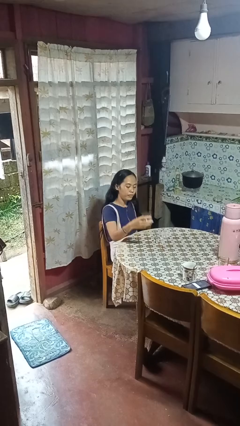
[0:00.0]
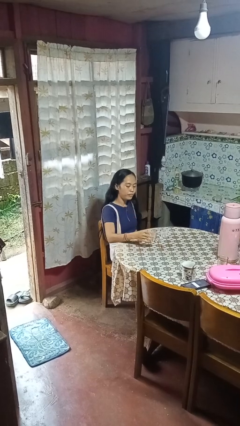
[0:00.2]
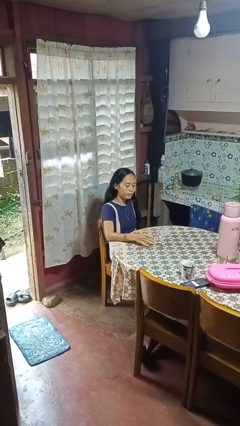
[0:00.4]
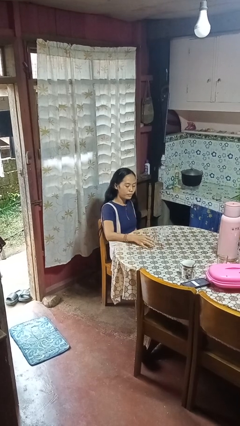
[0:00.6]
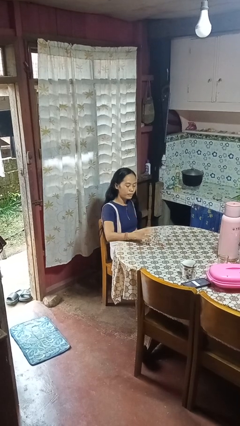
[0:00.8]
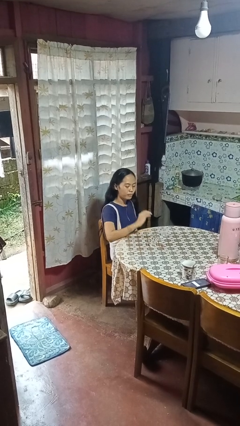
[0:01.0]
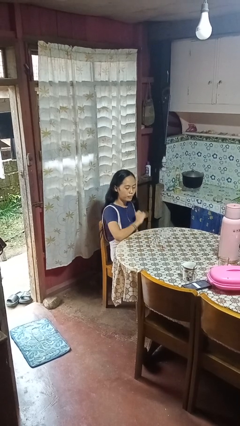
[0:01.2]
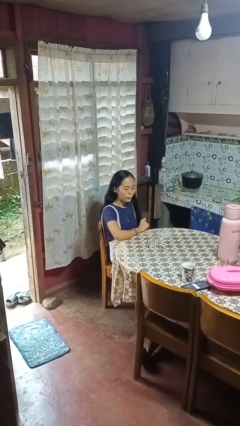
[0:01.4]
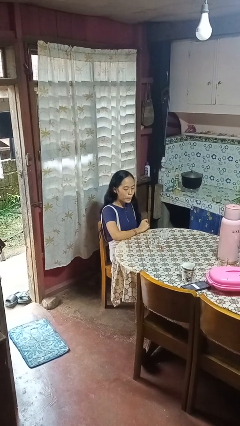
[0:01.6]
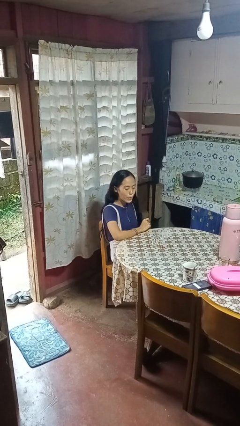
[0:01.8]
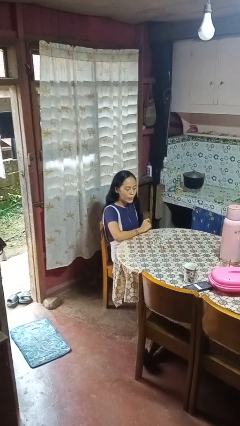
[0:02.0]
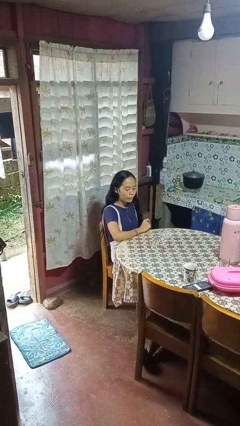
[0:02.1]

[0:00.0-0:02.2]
person puts down object on table

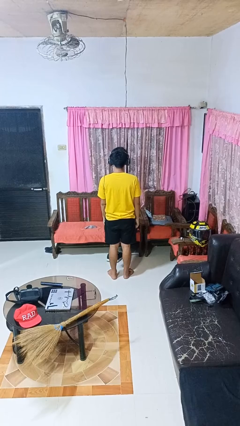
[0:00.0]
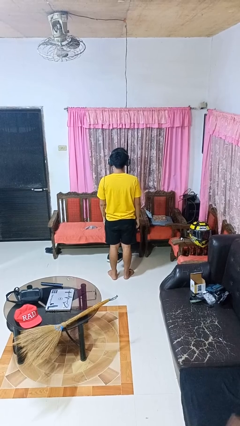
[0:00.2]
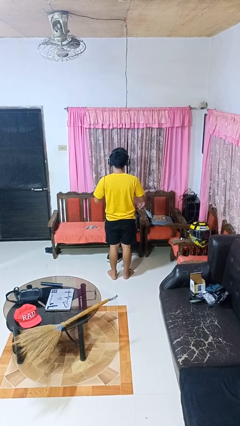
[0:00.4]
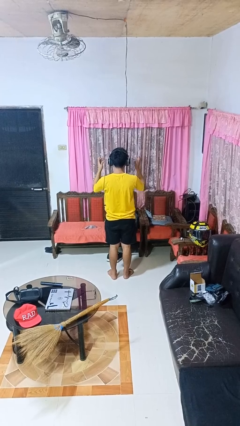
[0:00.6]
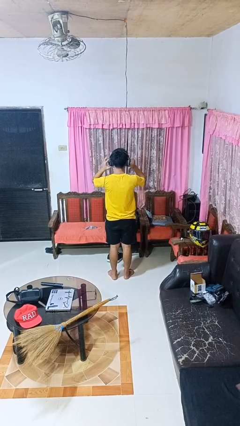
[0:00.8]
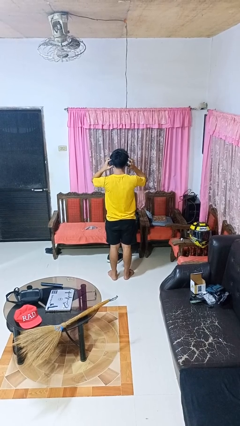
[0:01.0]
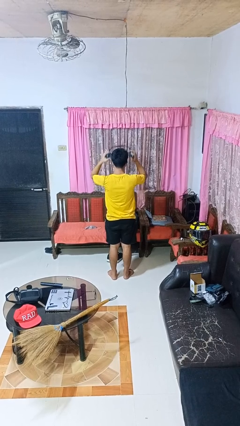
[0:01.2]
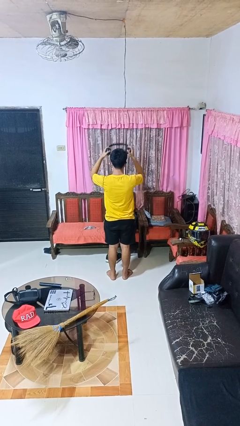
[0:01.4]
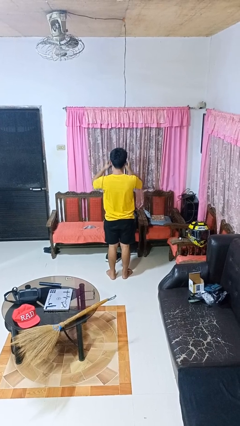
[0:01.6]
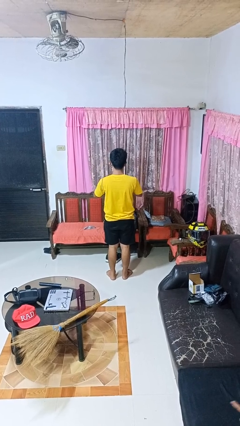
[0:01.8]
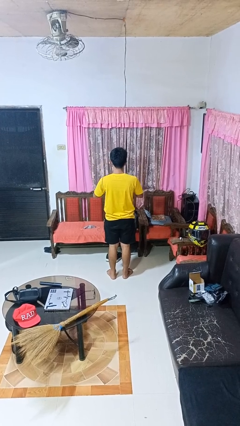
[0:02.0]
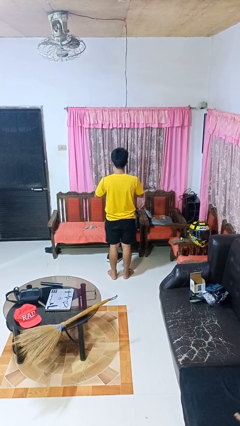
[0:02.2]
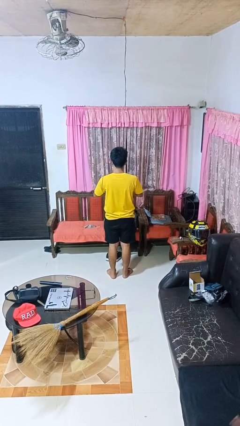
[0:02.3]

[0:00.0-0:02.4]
person takes off headphones

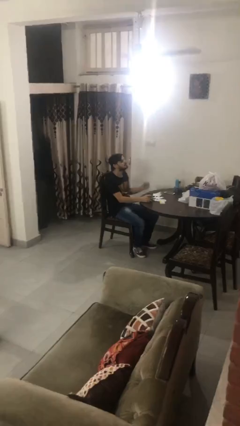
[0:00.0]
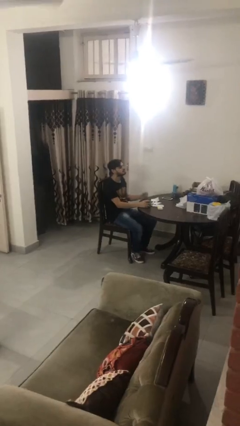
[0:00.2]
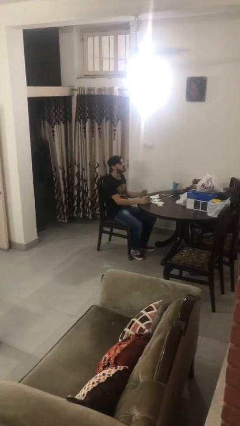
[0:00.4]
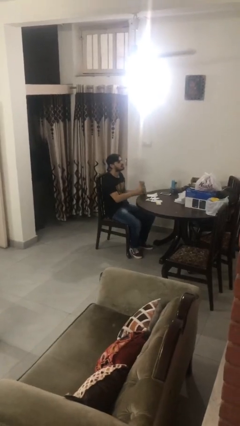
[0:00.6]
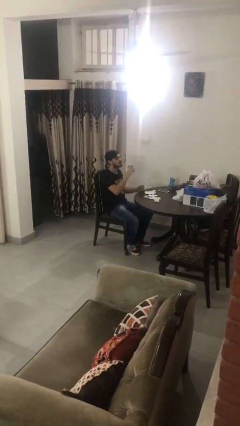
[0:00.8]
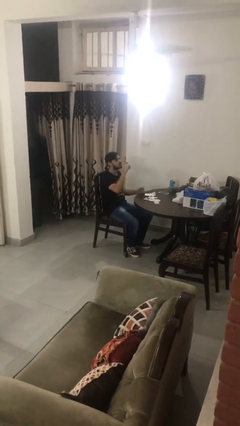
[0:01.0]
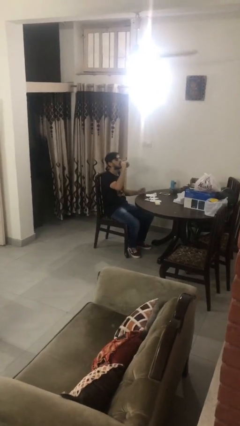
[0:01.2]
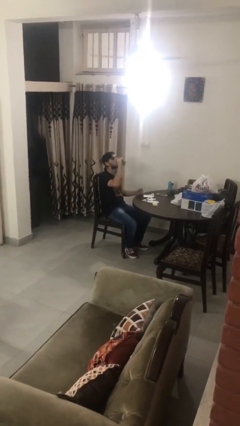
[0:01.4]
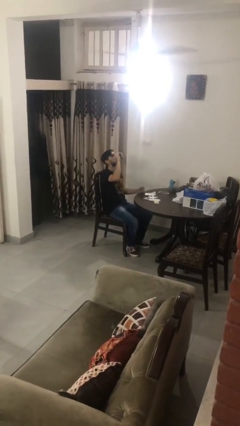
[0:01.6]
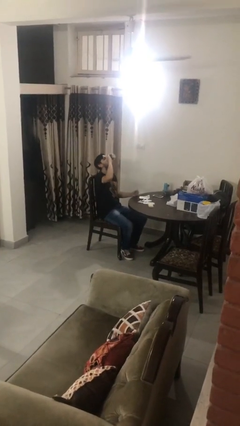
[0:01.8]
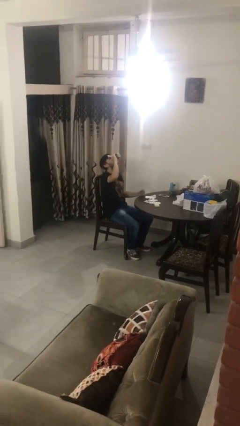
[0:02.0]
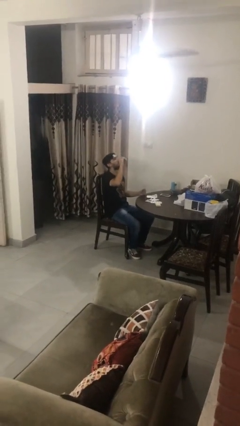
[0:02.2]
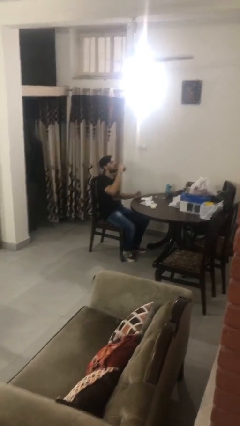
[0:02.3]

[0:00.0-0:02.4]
person drinks from cup

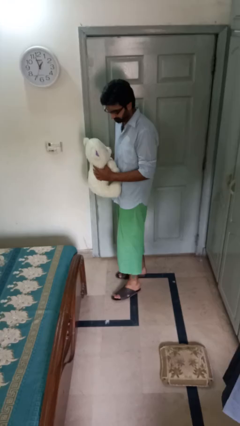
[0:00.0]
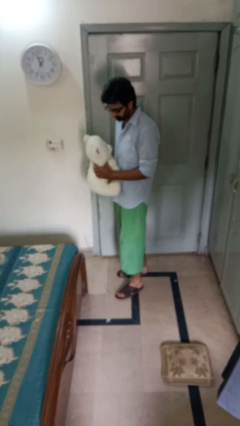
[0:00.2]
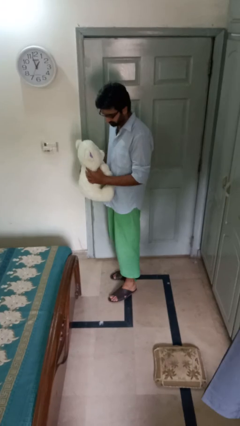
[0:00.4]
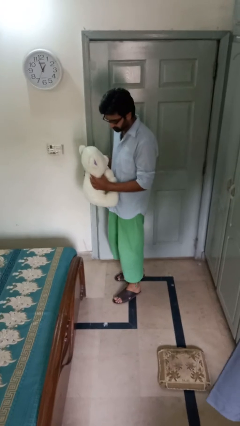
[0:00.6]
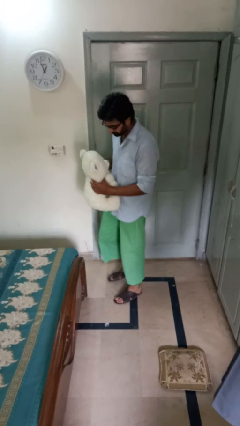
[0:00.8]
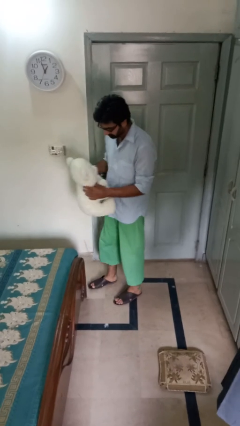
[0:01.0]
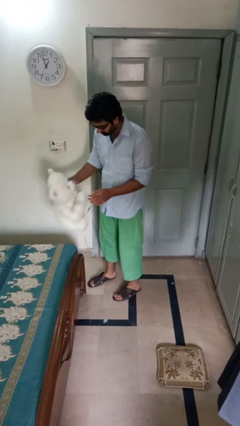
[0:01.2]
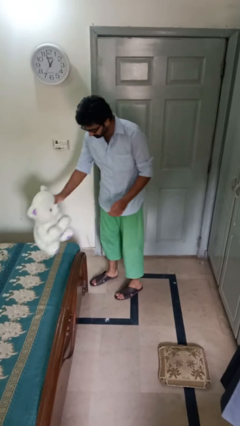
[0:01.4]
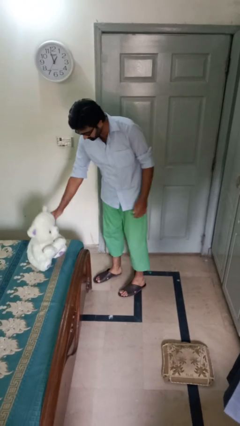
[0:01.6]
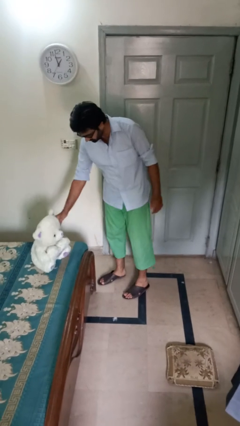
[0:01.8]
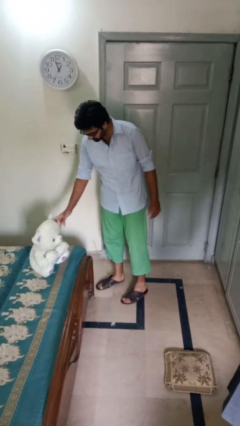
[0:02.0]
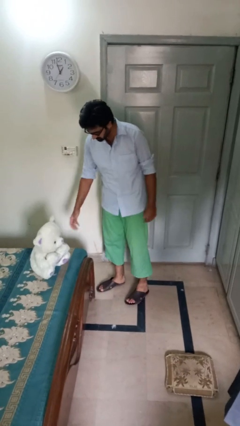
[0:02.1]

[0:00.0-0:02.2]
person puts down object on bed

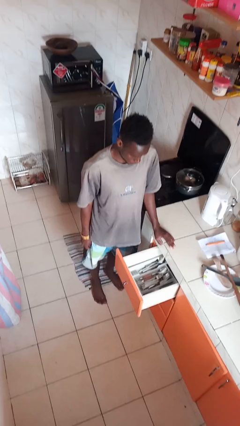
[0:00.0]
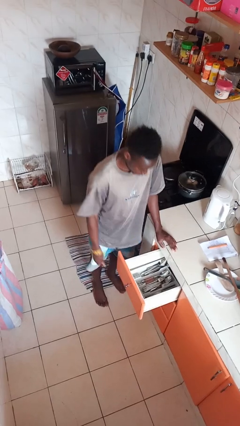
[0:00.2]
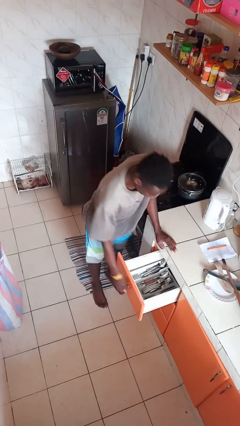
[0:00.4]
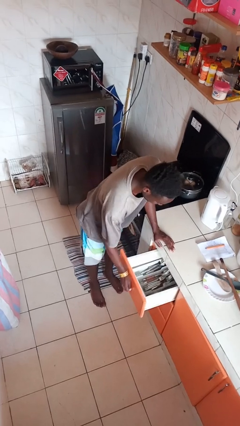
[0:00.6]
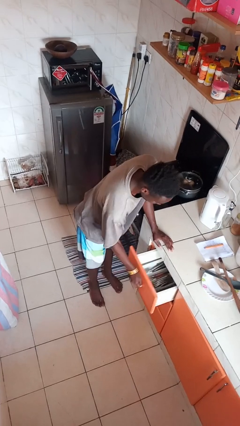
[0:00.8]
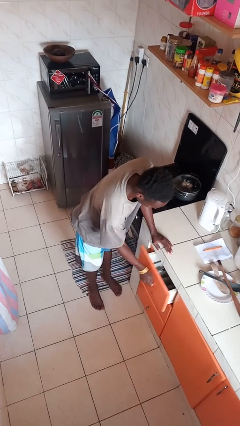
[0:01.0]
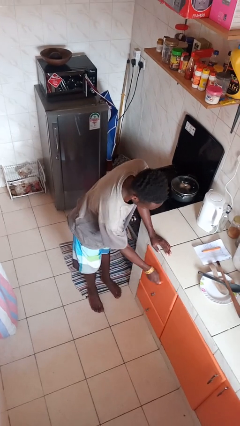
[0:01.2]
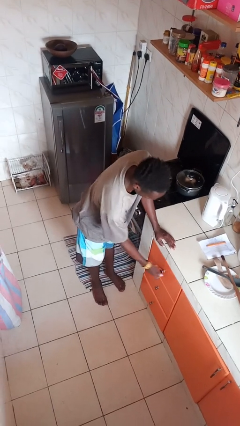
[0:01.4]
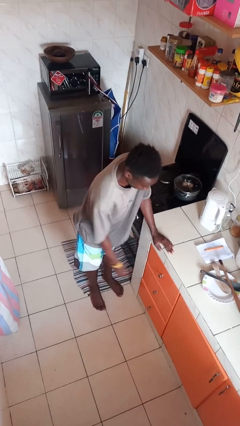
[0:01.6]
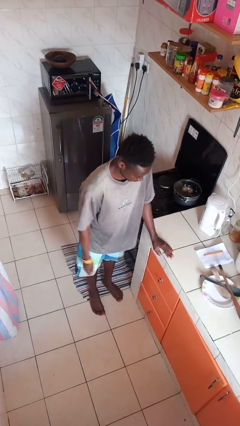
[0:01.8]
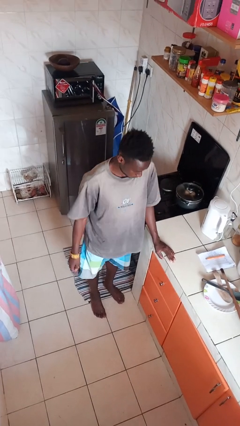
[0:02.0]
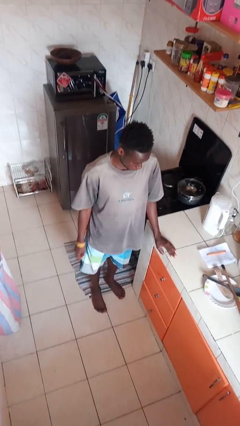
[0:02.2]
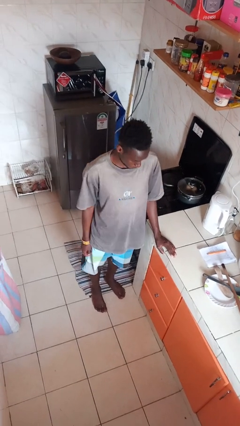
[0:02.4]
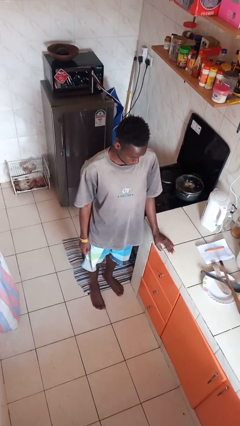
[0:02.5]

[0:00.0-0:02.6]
person closes kitchen drawer

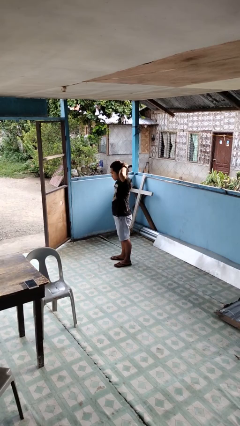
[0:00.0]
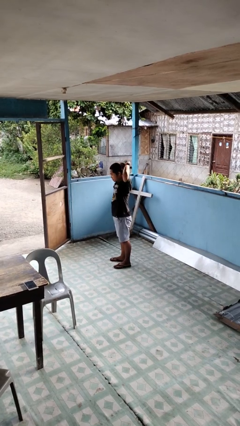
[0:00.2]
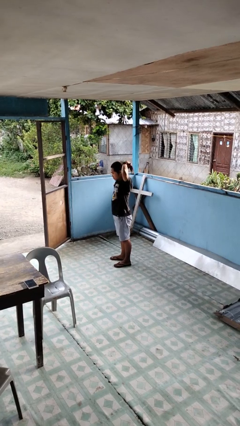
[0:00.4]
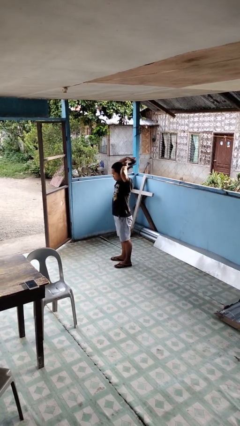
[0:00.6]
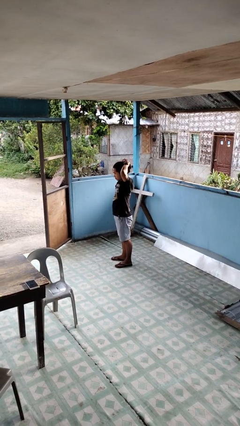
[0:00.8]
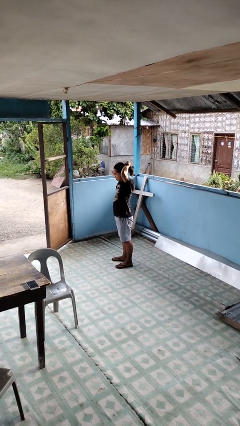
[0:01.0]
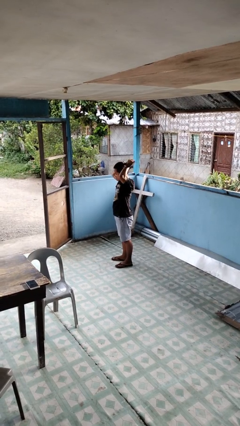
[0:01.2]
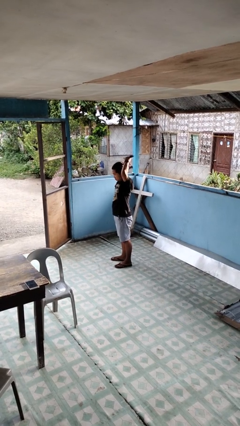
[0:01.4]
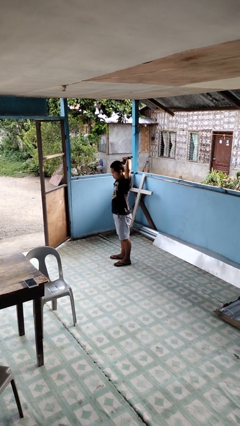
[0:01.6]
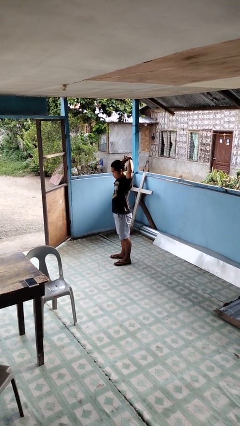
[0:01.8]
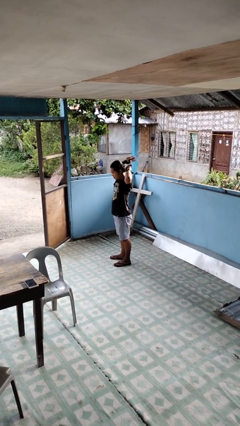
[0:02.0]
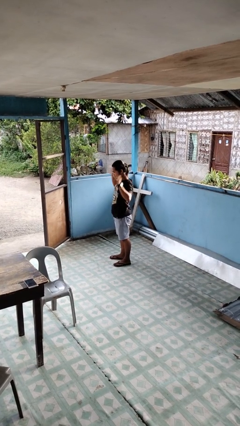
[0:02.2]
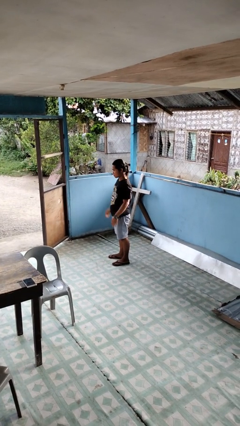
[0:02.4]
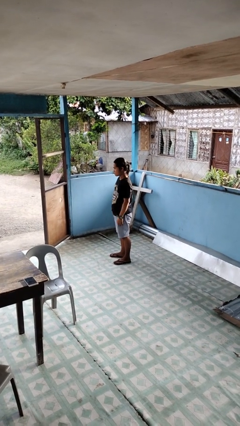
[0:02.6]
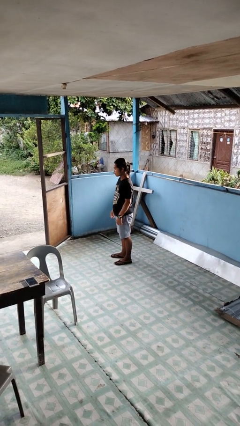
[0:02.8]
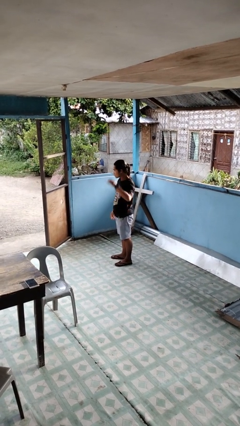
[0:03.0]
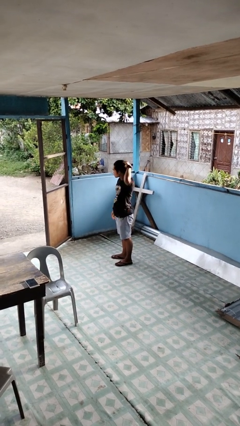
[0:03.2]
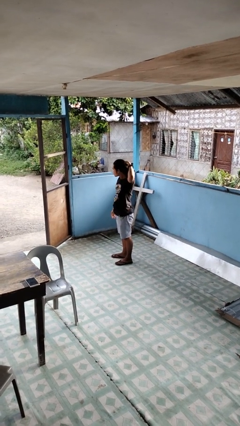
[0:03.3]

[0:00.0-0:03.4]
person puts hair in ponytail

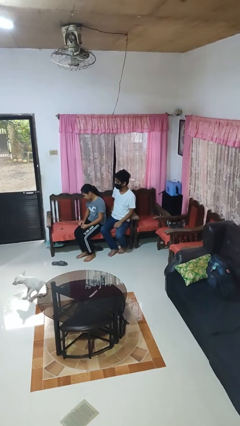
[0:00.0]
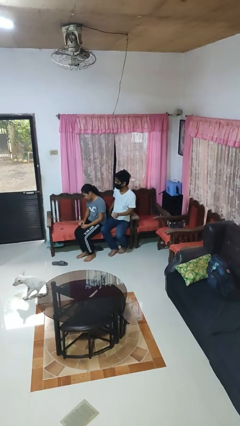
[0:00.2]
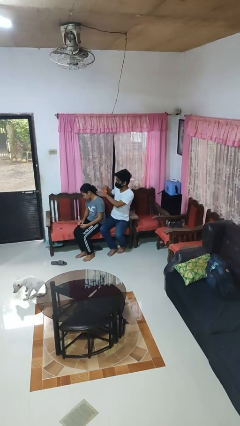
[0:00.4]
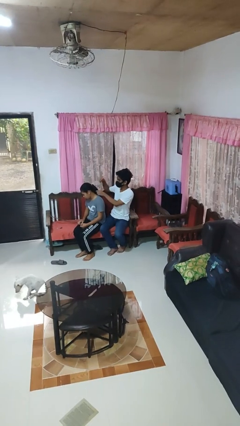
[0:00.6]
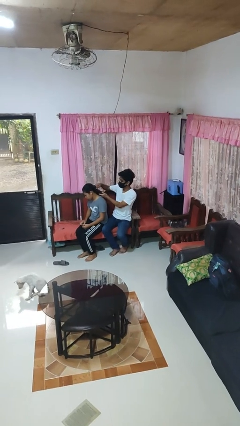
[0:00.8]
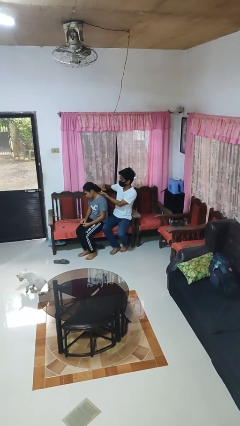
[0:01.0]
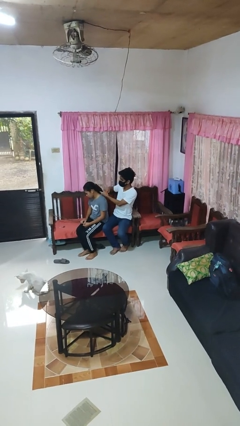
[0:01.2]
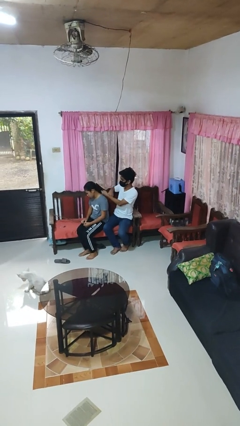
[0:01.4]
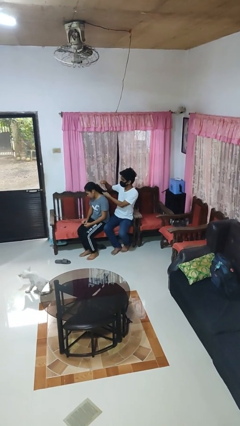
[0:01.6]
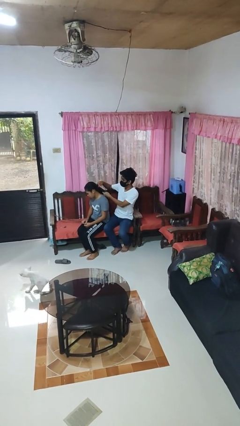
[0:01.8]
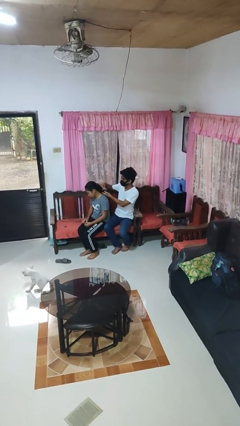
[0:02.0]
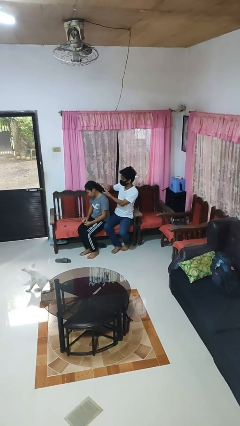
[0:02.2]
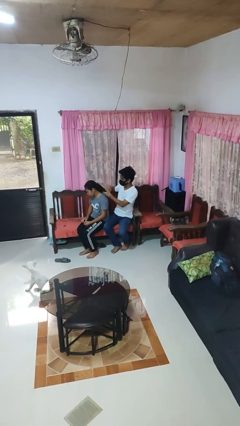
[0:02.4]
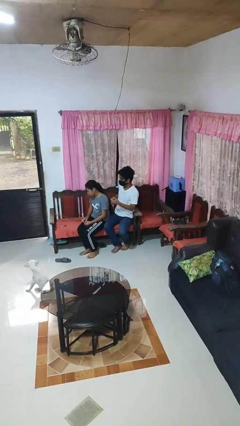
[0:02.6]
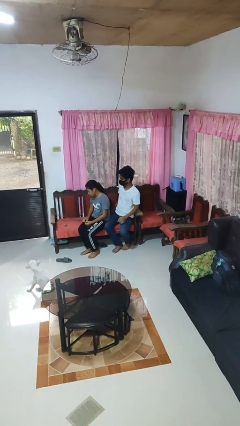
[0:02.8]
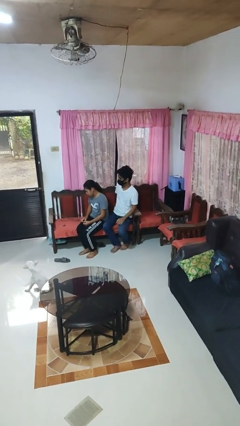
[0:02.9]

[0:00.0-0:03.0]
person brushes hair of person
